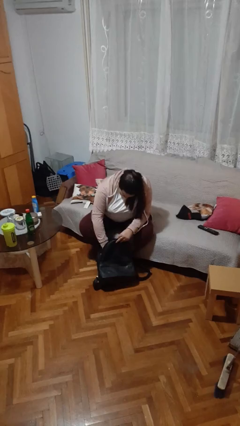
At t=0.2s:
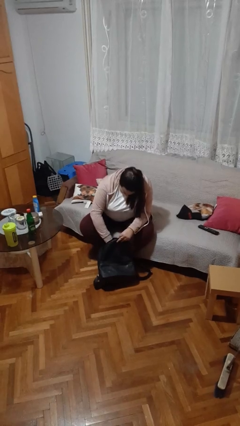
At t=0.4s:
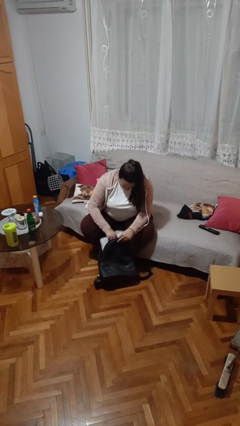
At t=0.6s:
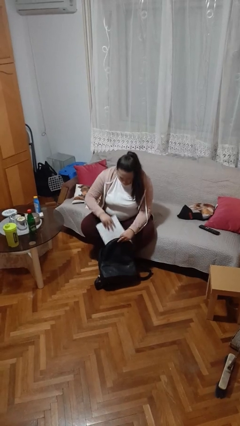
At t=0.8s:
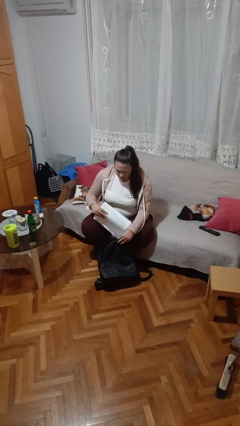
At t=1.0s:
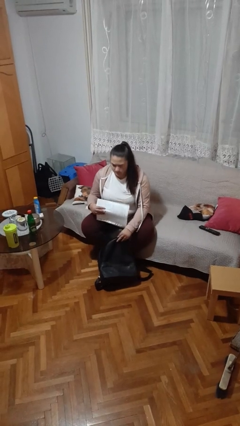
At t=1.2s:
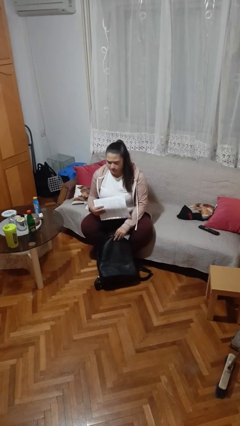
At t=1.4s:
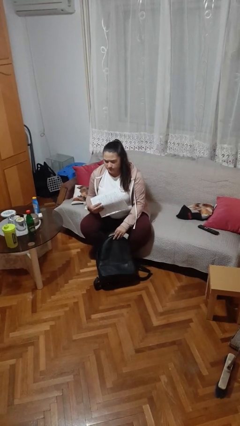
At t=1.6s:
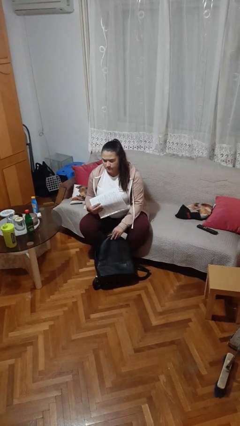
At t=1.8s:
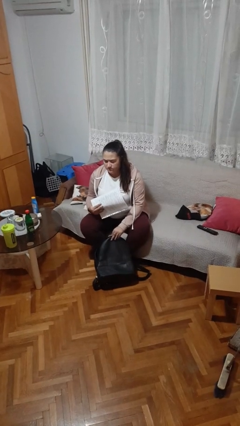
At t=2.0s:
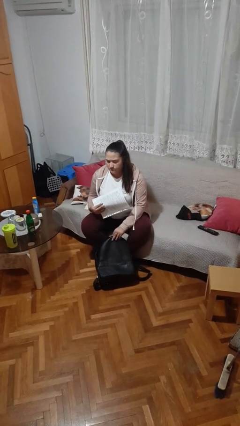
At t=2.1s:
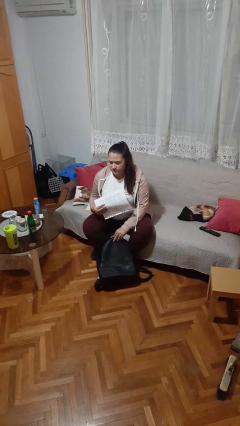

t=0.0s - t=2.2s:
person takes object from backpack

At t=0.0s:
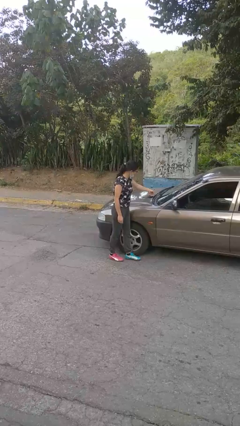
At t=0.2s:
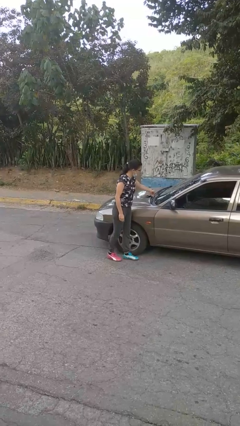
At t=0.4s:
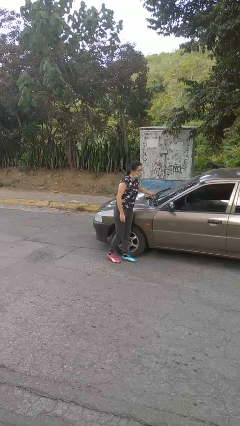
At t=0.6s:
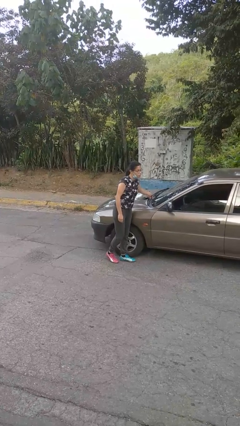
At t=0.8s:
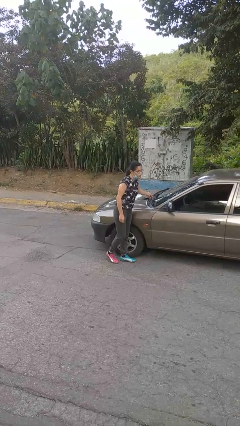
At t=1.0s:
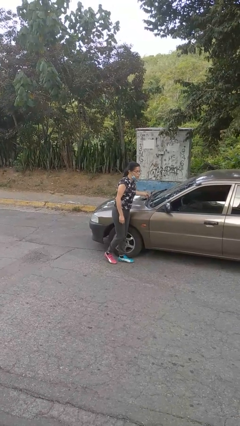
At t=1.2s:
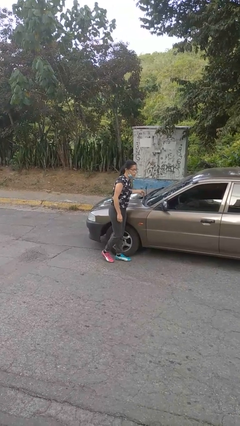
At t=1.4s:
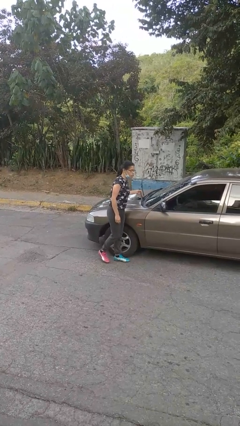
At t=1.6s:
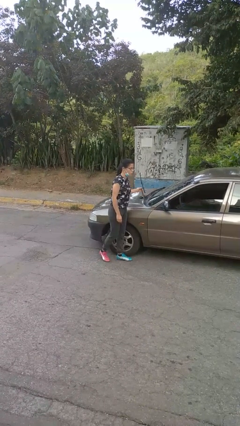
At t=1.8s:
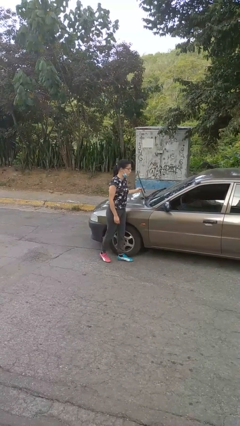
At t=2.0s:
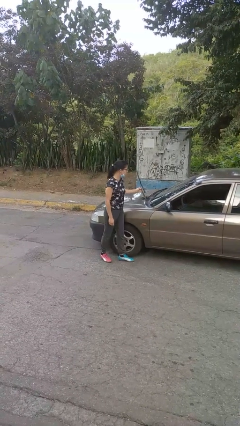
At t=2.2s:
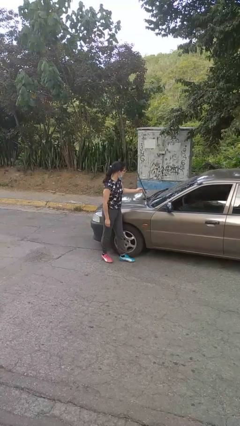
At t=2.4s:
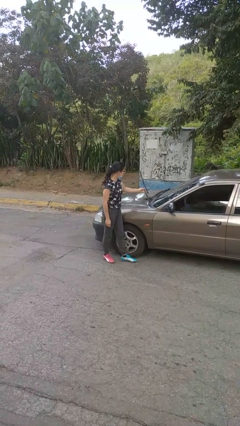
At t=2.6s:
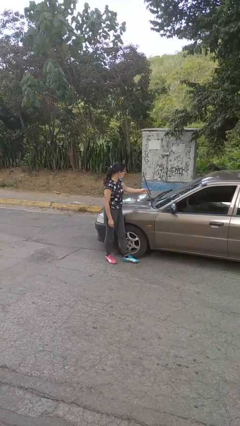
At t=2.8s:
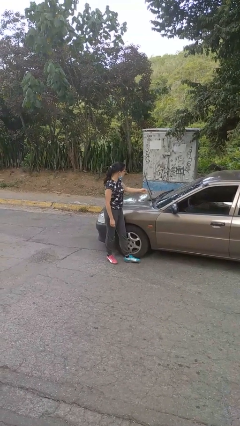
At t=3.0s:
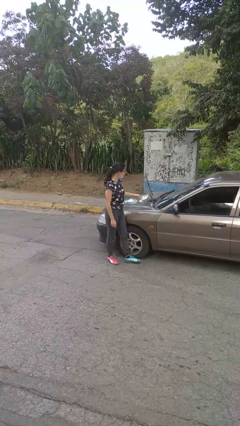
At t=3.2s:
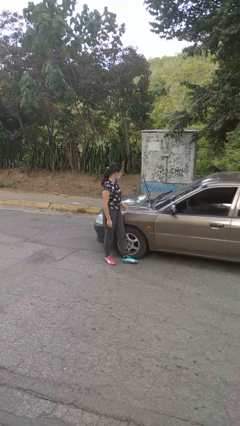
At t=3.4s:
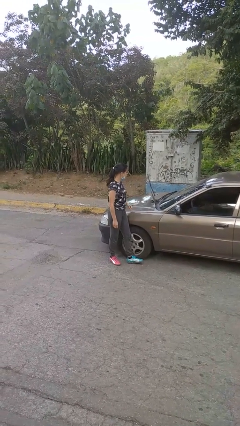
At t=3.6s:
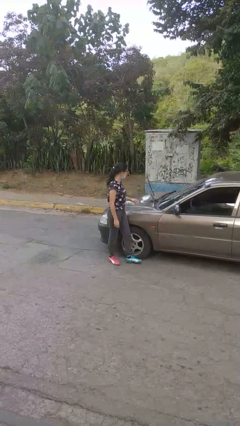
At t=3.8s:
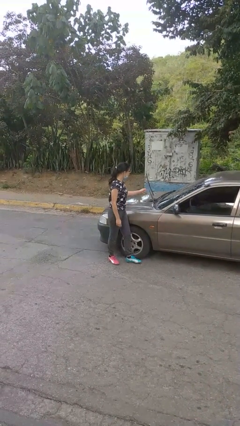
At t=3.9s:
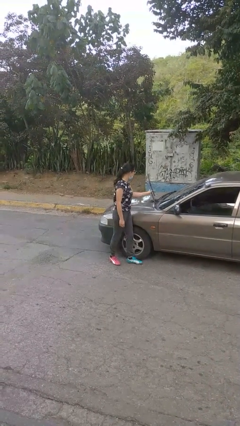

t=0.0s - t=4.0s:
person flips up car wipers

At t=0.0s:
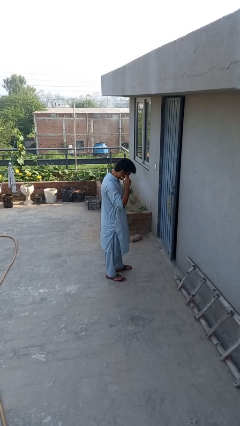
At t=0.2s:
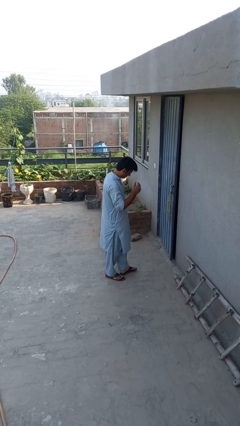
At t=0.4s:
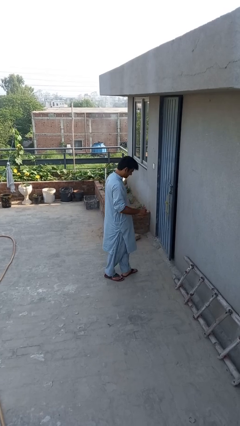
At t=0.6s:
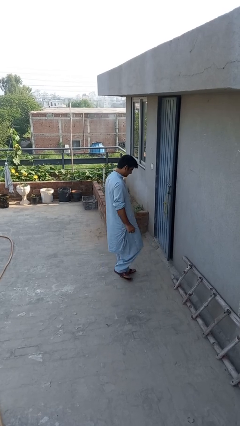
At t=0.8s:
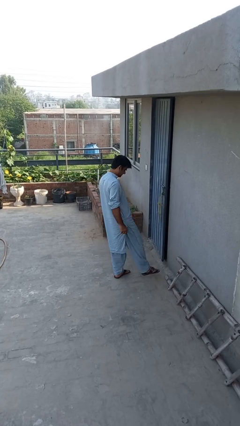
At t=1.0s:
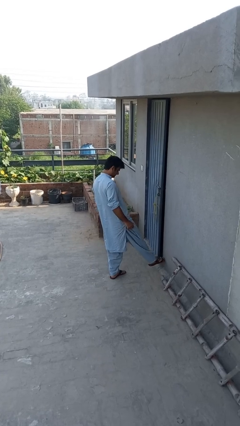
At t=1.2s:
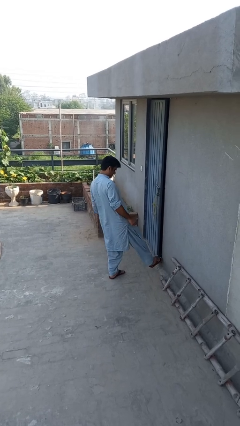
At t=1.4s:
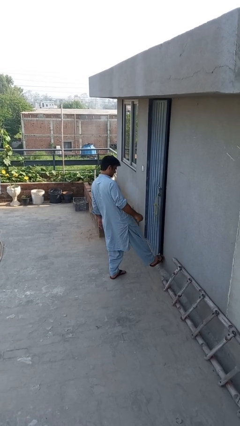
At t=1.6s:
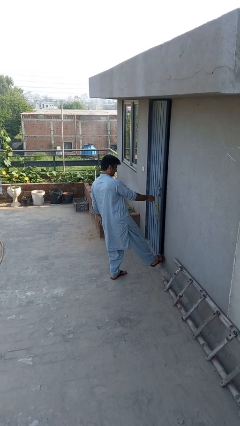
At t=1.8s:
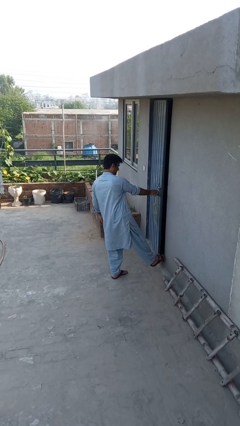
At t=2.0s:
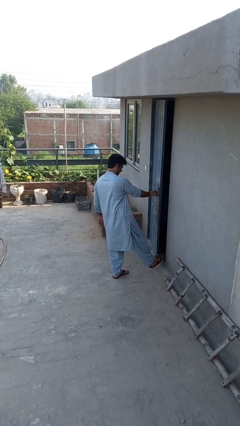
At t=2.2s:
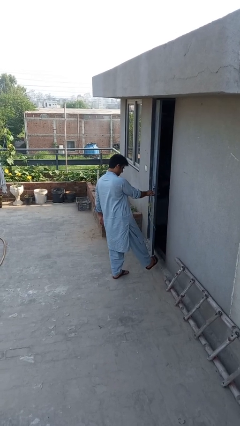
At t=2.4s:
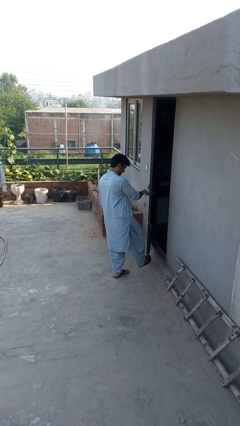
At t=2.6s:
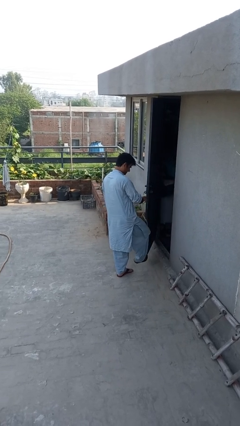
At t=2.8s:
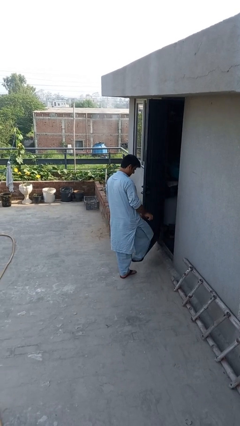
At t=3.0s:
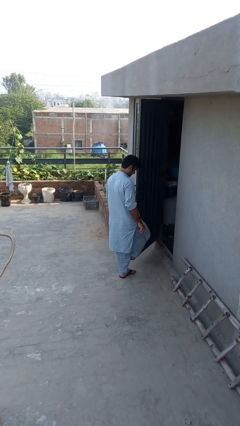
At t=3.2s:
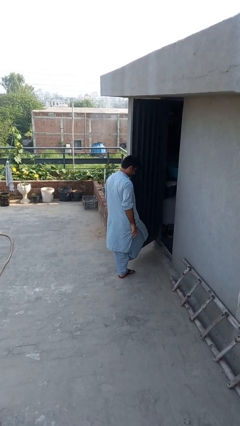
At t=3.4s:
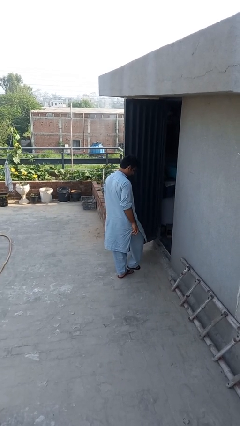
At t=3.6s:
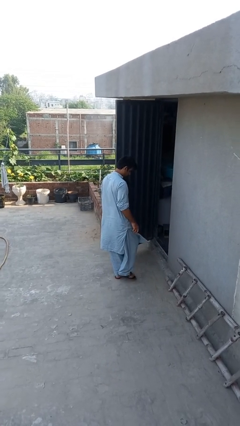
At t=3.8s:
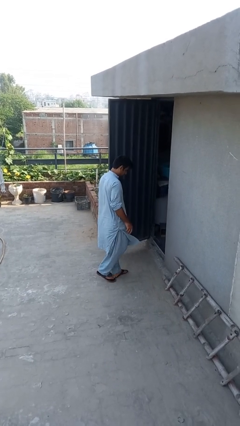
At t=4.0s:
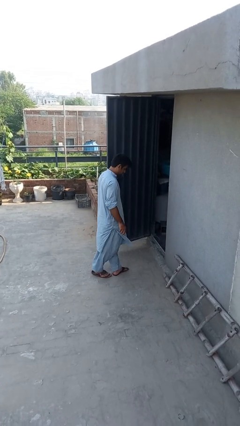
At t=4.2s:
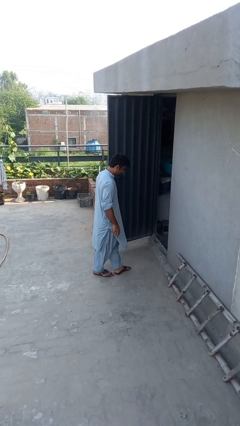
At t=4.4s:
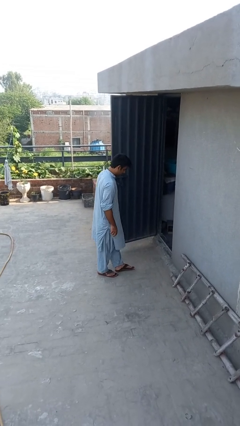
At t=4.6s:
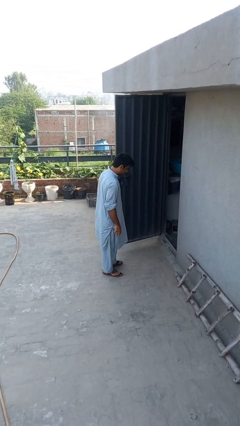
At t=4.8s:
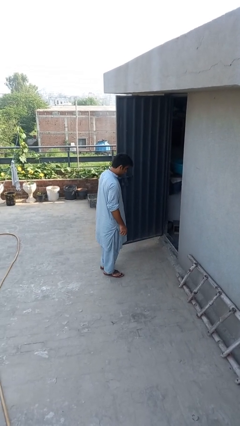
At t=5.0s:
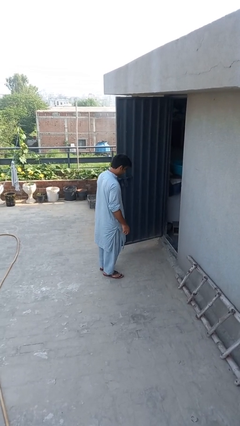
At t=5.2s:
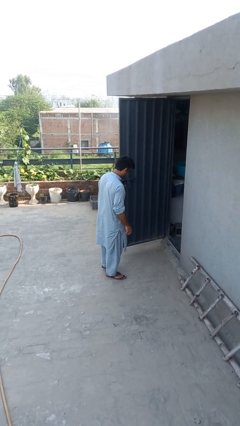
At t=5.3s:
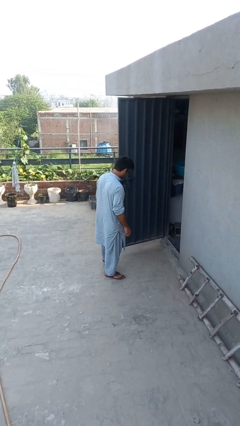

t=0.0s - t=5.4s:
person opens facility door

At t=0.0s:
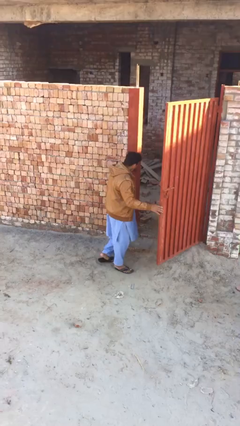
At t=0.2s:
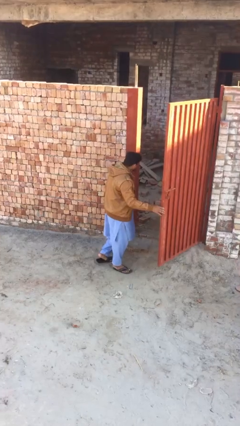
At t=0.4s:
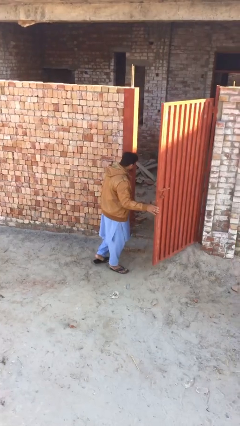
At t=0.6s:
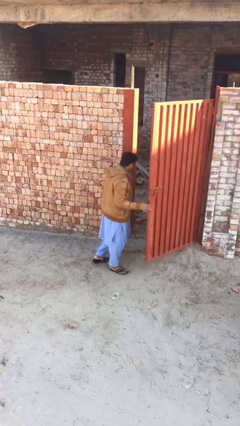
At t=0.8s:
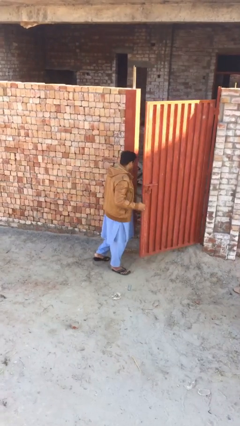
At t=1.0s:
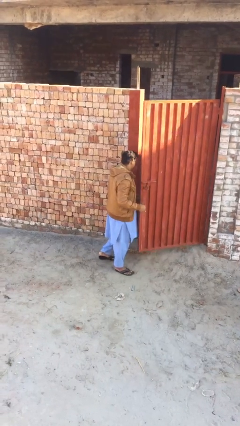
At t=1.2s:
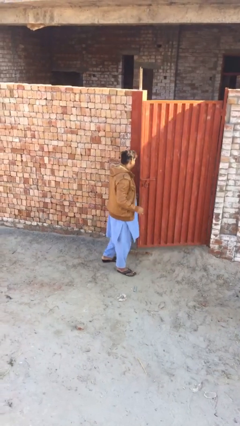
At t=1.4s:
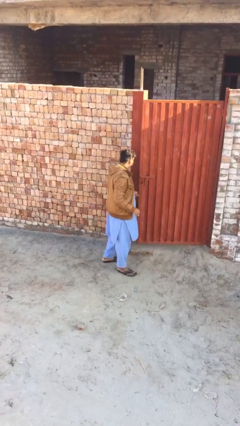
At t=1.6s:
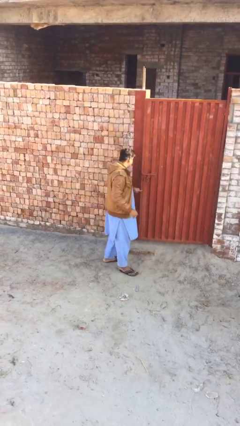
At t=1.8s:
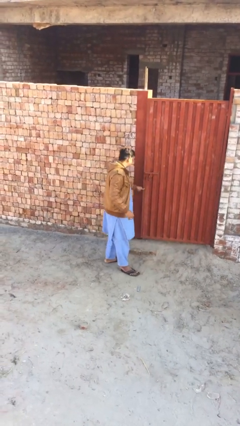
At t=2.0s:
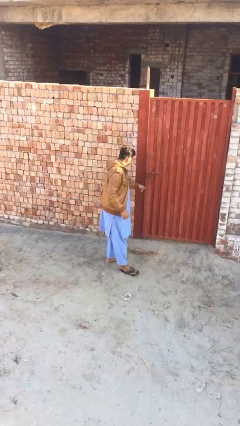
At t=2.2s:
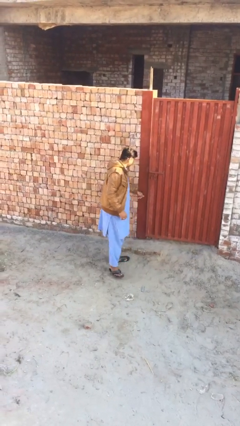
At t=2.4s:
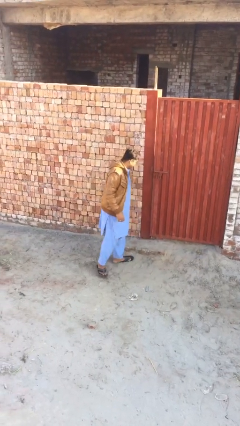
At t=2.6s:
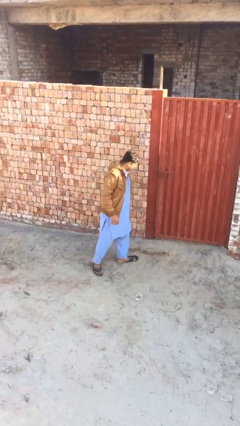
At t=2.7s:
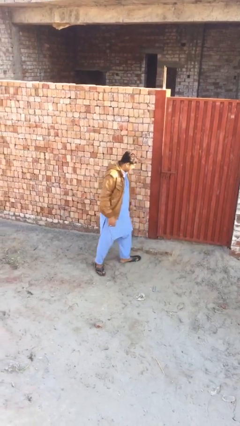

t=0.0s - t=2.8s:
person closes facility door

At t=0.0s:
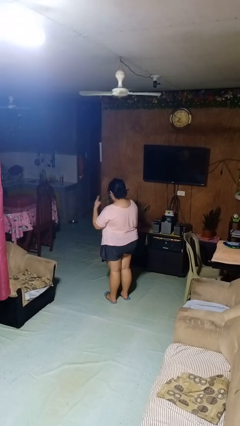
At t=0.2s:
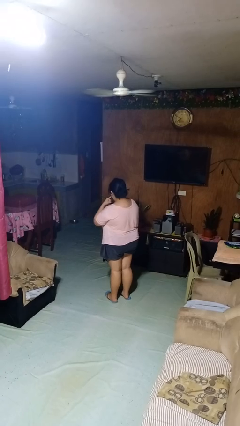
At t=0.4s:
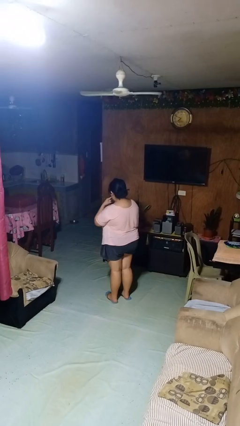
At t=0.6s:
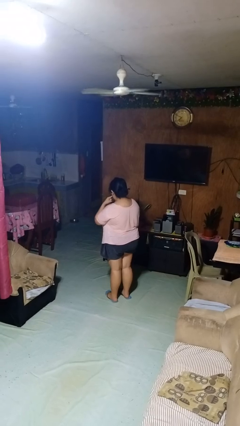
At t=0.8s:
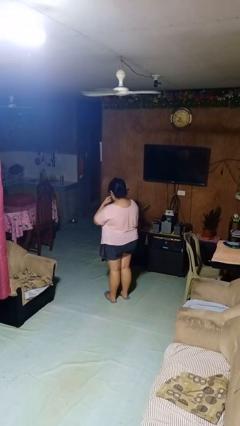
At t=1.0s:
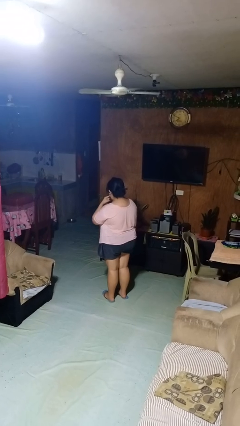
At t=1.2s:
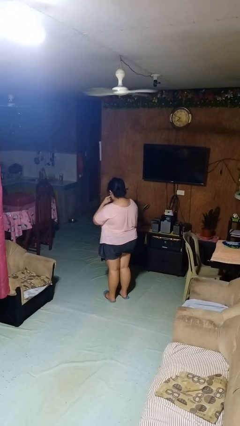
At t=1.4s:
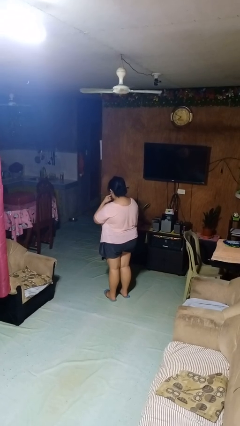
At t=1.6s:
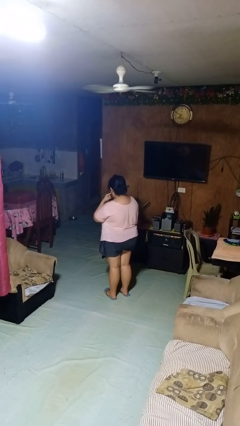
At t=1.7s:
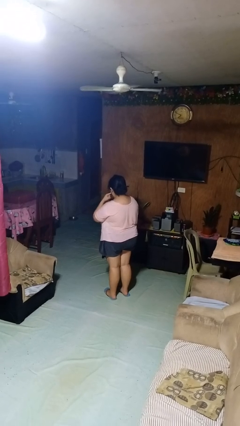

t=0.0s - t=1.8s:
person licks fingers

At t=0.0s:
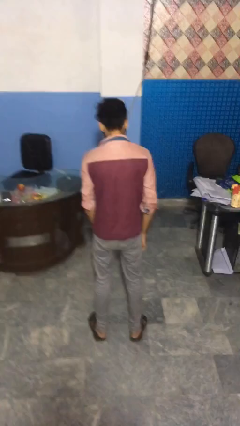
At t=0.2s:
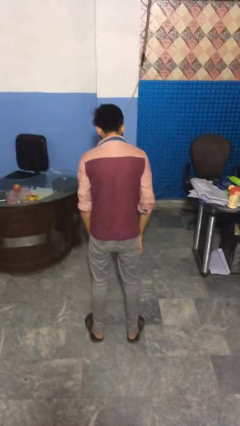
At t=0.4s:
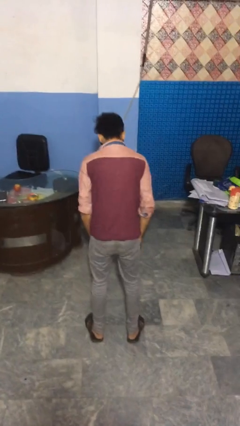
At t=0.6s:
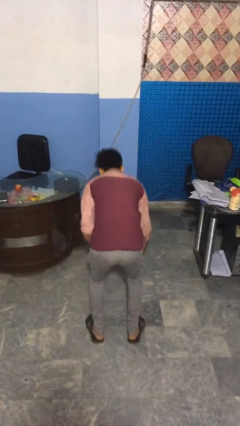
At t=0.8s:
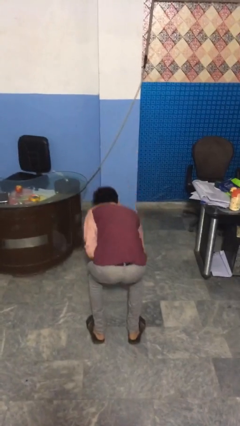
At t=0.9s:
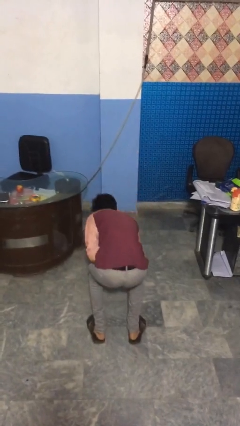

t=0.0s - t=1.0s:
person picks up object from floor
